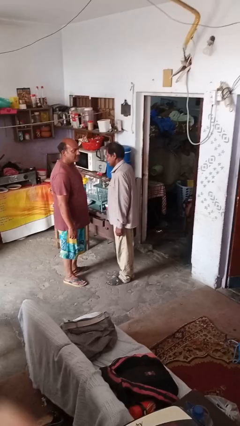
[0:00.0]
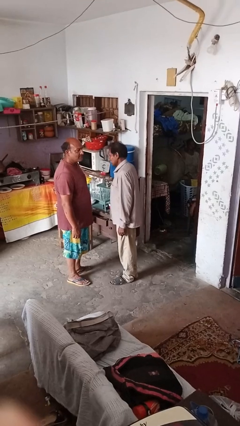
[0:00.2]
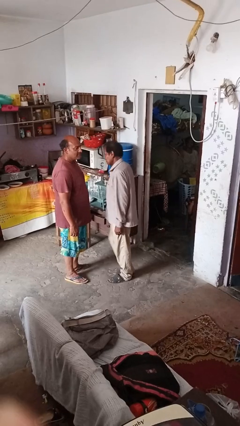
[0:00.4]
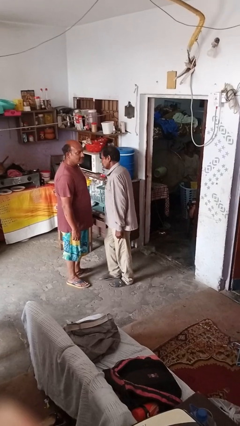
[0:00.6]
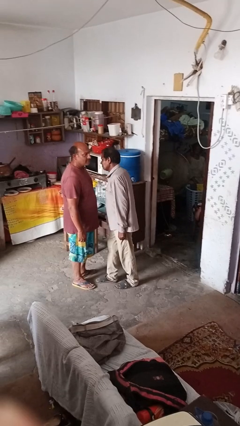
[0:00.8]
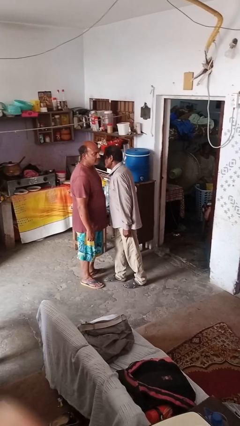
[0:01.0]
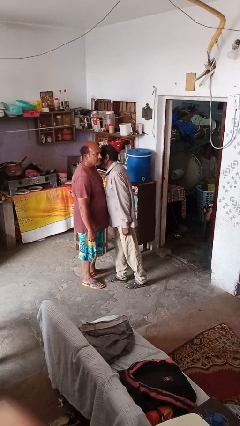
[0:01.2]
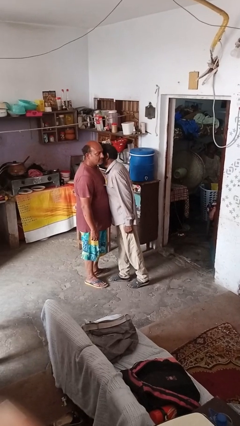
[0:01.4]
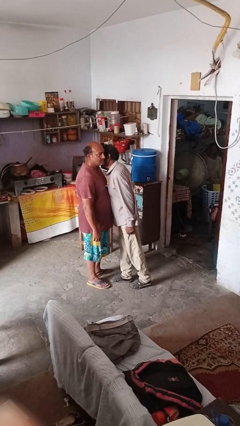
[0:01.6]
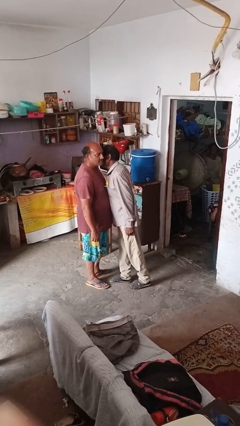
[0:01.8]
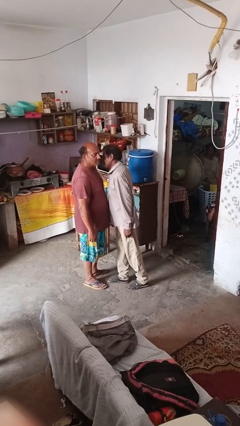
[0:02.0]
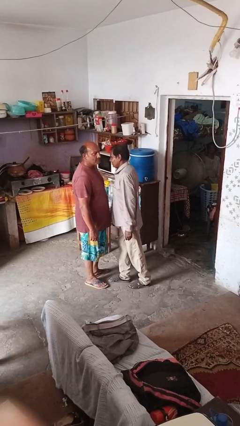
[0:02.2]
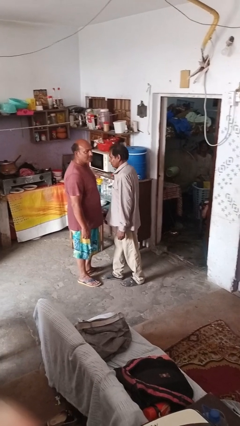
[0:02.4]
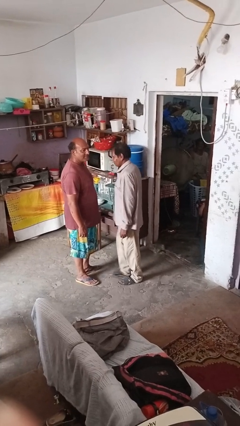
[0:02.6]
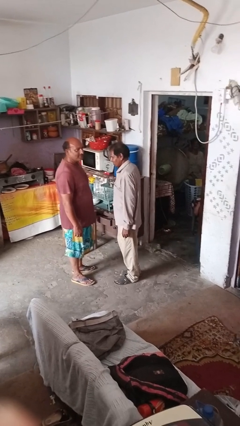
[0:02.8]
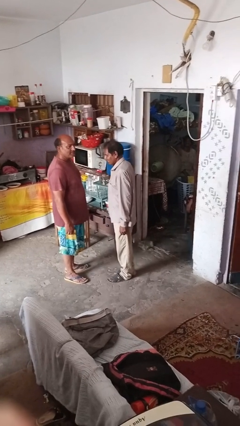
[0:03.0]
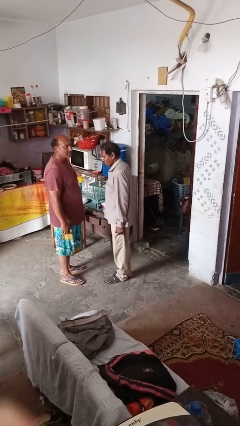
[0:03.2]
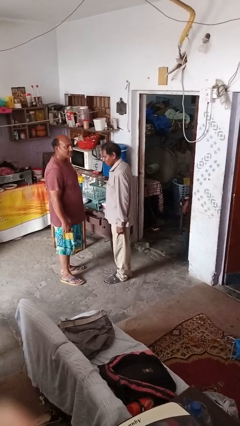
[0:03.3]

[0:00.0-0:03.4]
person kisses cheek of person

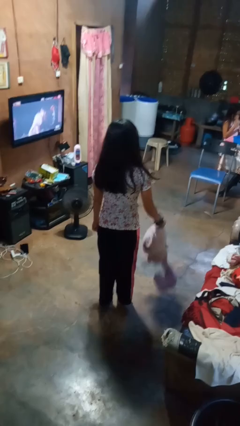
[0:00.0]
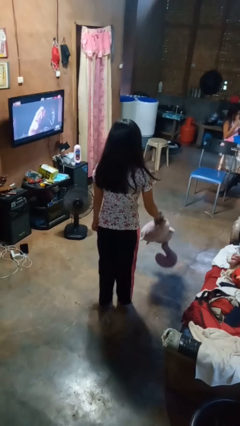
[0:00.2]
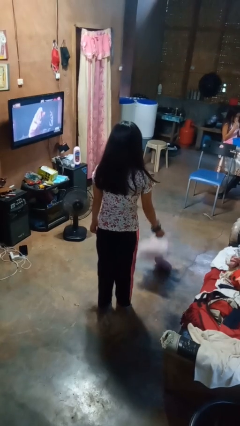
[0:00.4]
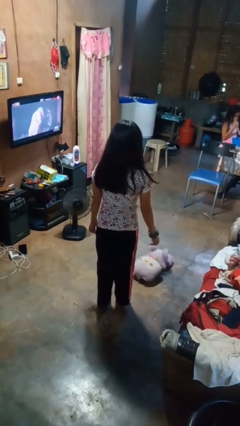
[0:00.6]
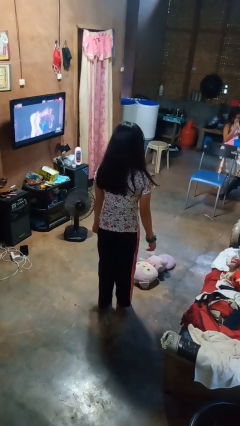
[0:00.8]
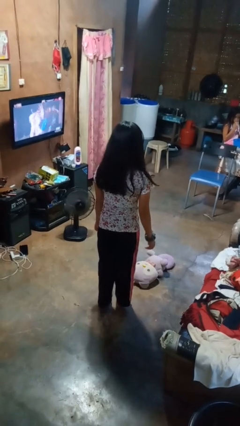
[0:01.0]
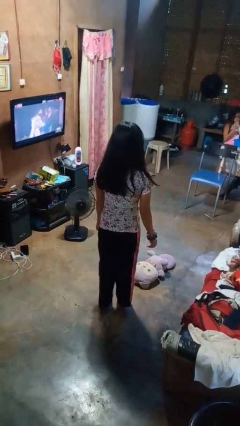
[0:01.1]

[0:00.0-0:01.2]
person throws object to ground

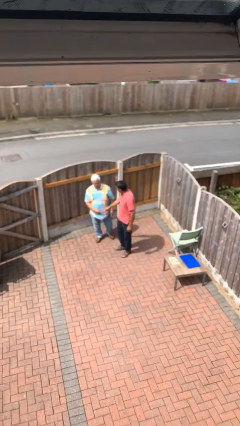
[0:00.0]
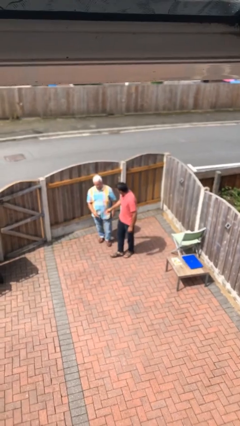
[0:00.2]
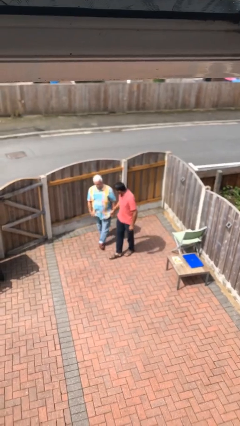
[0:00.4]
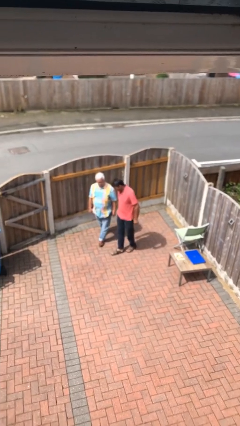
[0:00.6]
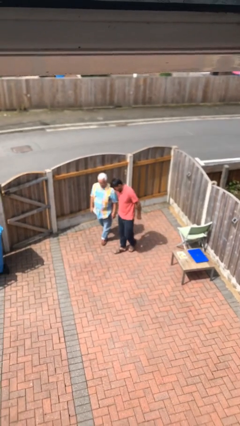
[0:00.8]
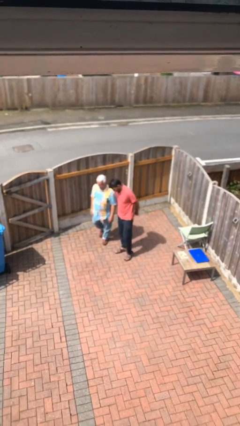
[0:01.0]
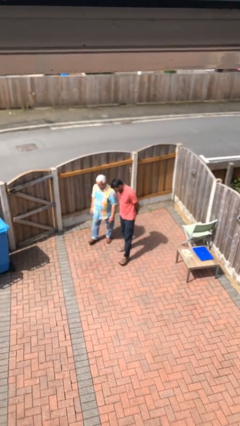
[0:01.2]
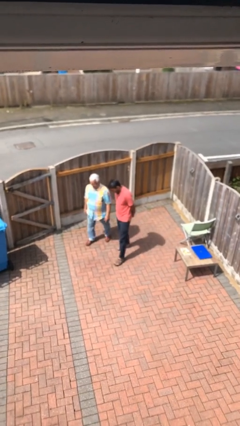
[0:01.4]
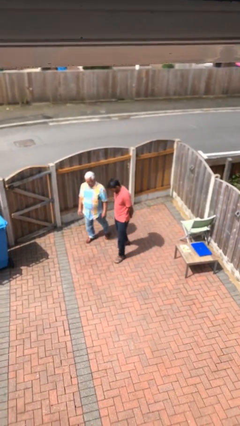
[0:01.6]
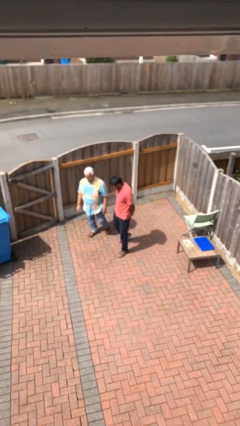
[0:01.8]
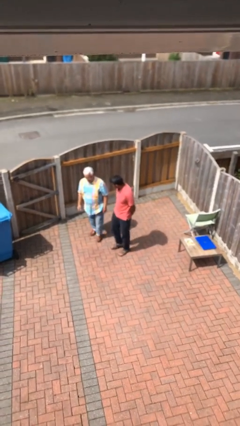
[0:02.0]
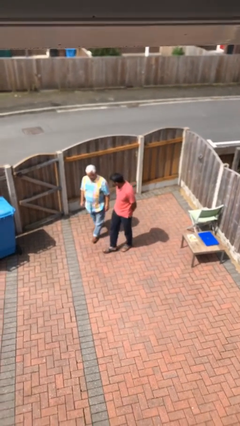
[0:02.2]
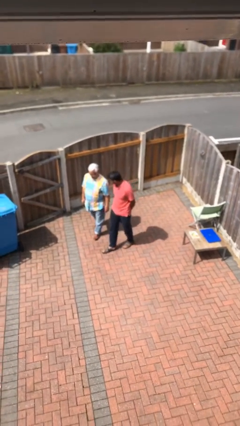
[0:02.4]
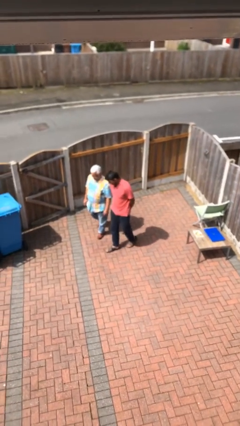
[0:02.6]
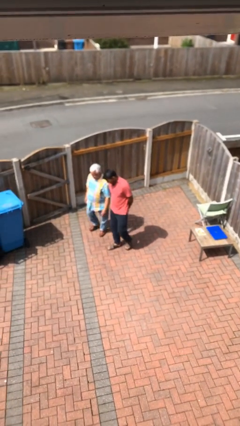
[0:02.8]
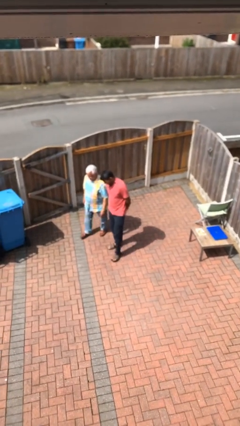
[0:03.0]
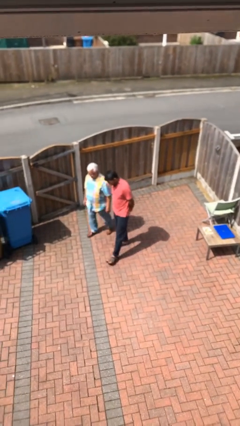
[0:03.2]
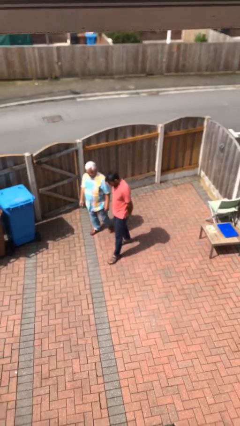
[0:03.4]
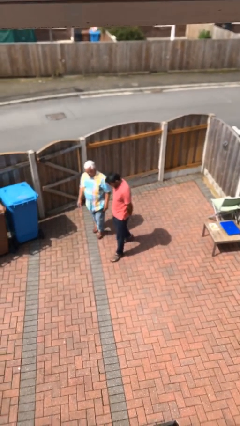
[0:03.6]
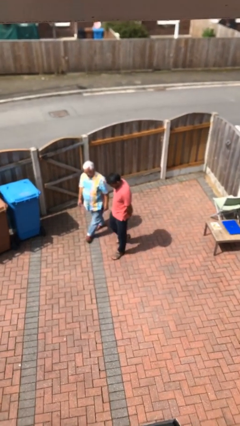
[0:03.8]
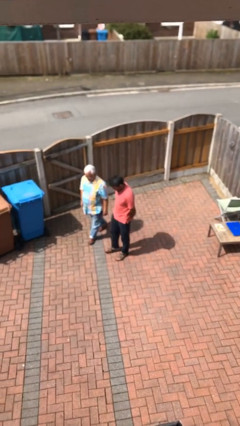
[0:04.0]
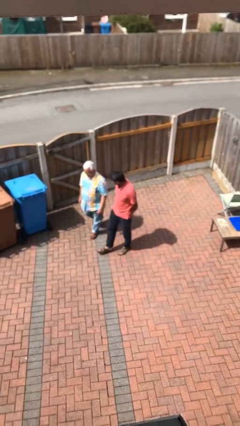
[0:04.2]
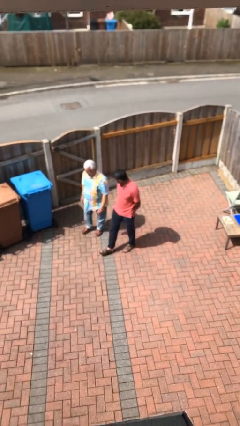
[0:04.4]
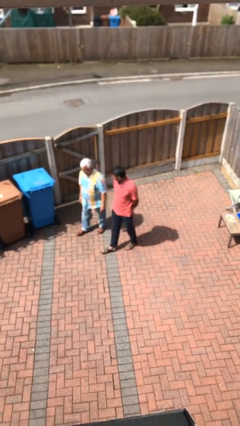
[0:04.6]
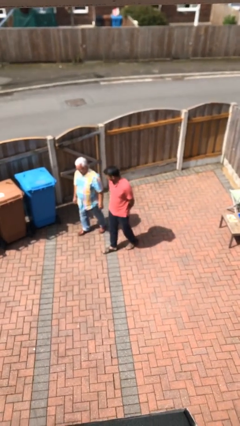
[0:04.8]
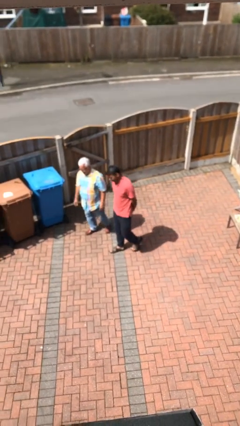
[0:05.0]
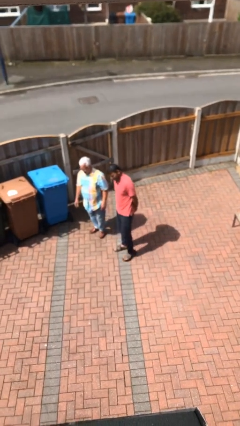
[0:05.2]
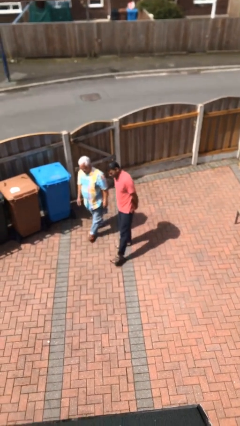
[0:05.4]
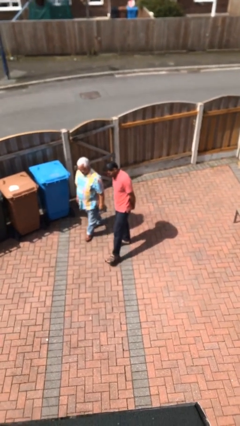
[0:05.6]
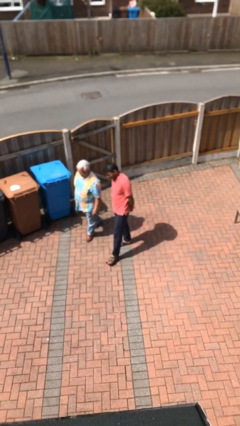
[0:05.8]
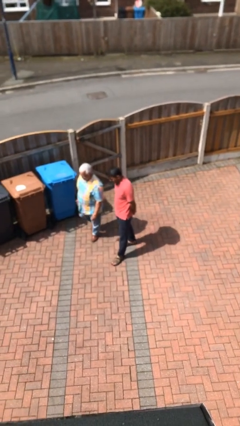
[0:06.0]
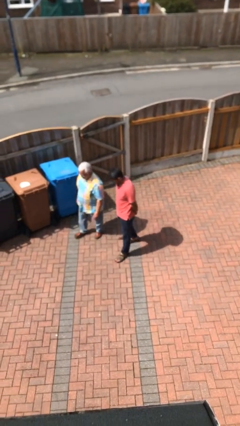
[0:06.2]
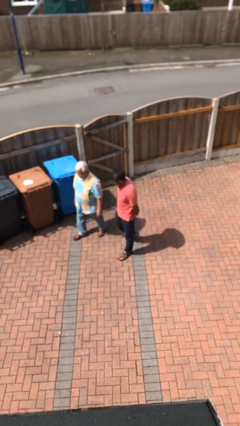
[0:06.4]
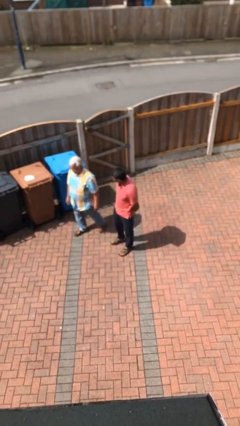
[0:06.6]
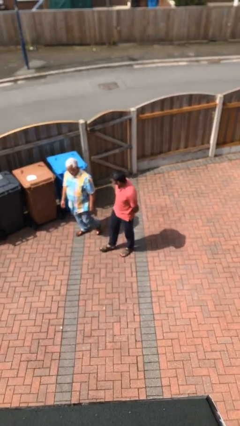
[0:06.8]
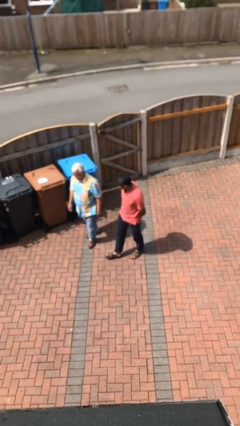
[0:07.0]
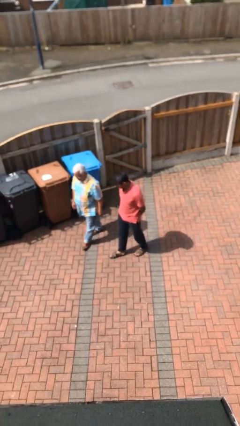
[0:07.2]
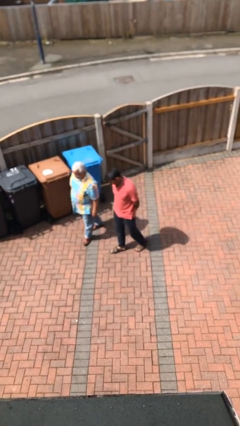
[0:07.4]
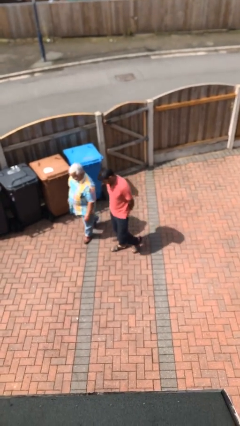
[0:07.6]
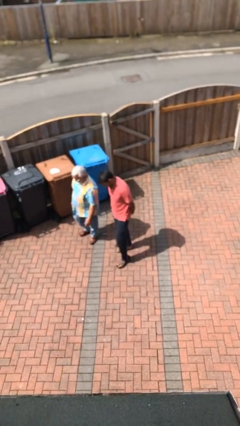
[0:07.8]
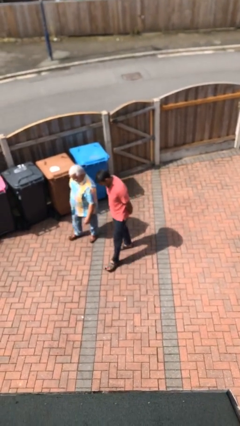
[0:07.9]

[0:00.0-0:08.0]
person talks to person

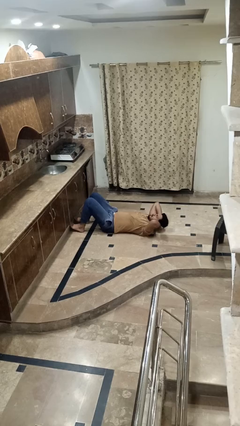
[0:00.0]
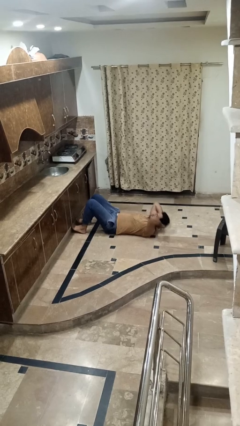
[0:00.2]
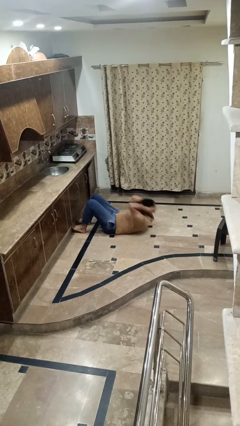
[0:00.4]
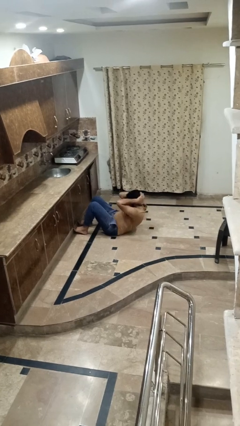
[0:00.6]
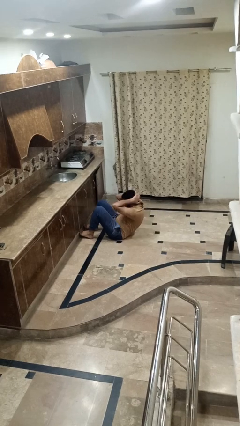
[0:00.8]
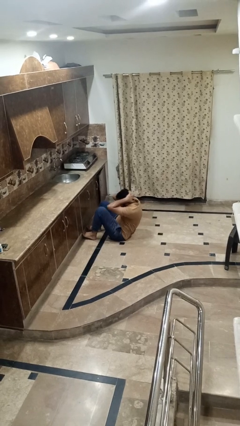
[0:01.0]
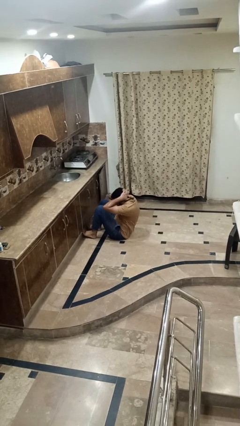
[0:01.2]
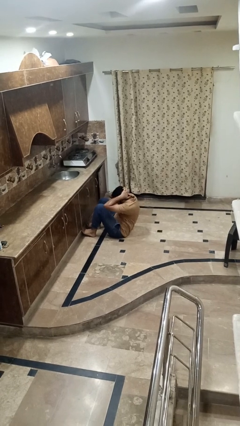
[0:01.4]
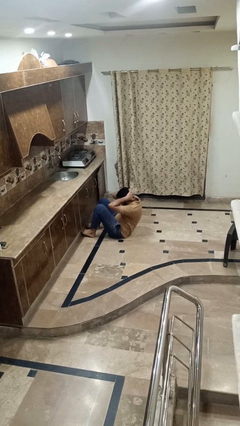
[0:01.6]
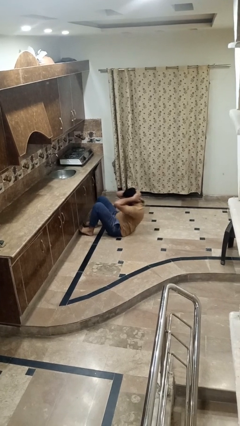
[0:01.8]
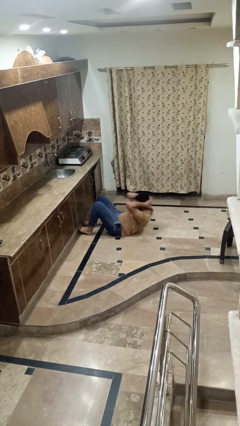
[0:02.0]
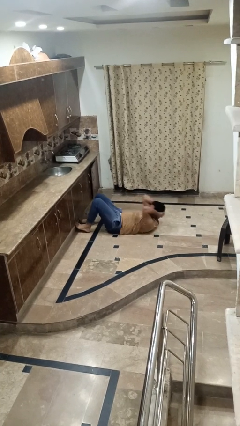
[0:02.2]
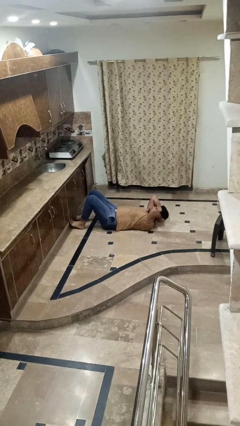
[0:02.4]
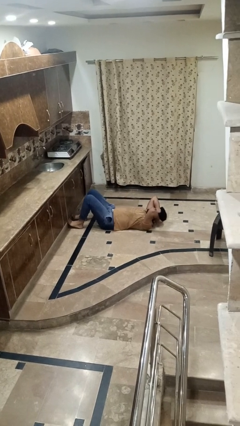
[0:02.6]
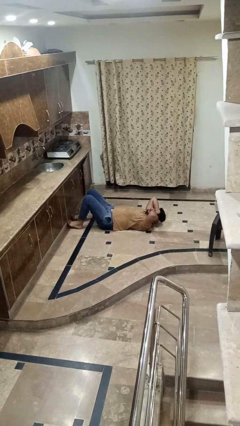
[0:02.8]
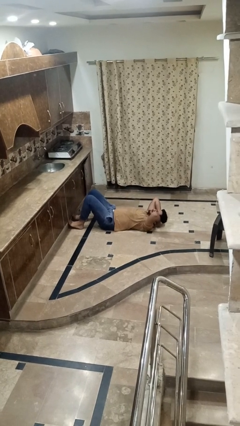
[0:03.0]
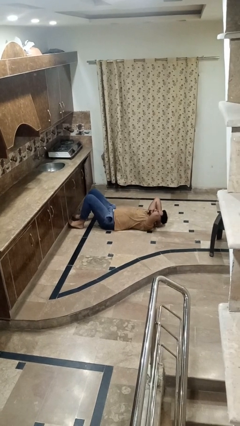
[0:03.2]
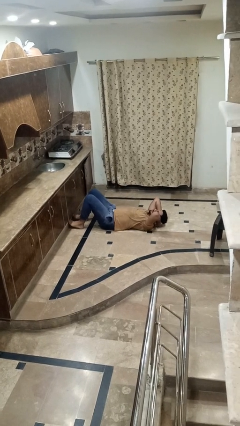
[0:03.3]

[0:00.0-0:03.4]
person exercises with situp

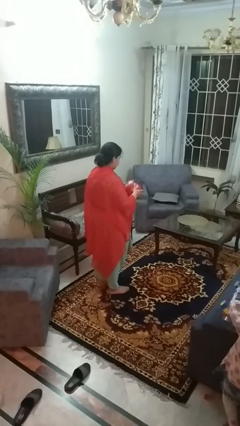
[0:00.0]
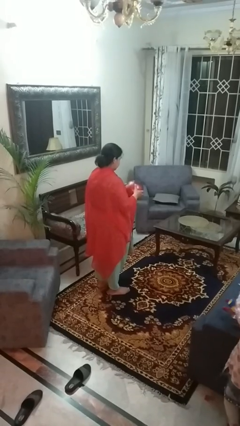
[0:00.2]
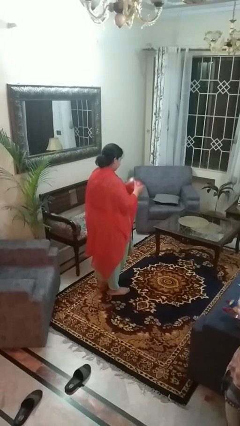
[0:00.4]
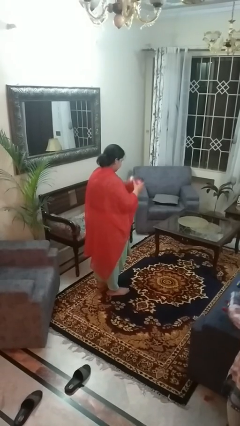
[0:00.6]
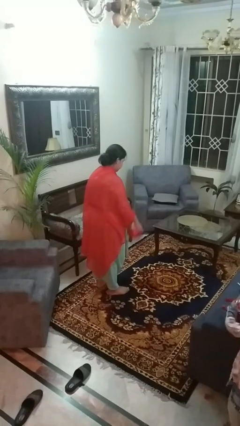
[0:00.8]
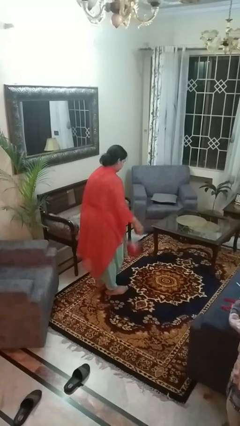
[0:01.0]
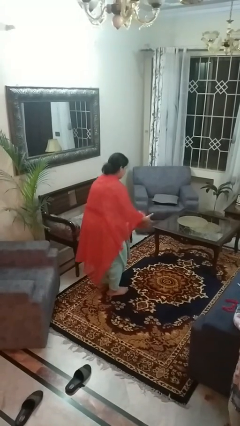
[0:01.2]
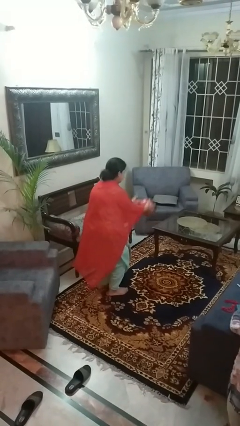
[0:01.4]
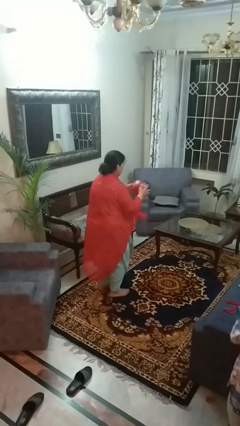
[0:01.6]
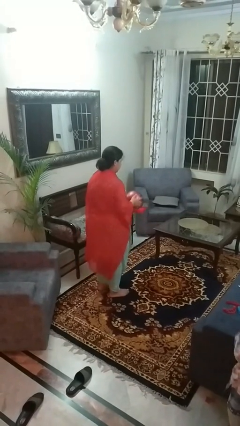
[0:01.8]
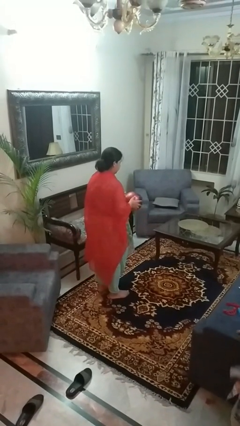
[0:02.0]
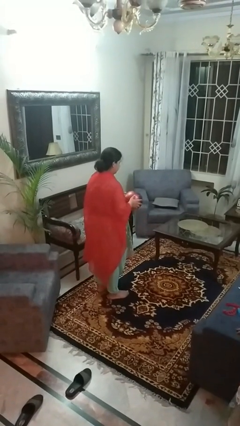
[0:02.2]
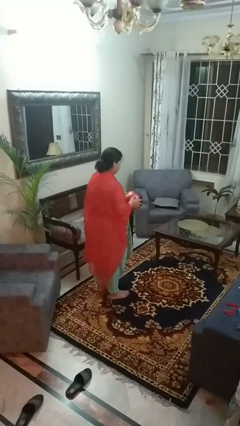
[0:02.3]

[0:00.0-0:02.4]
person bounces ball on floor
